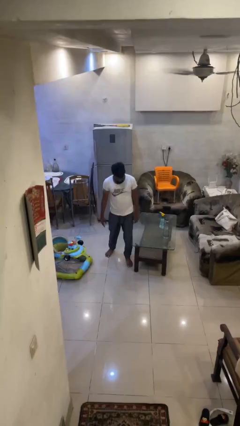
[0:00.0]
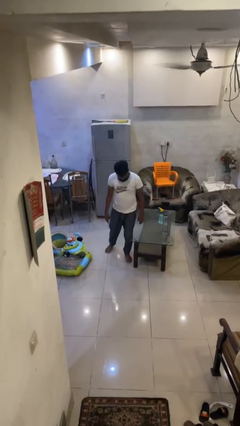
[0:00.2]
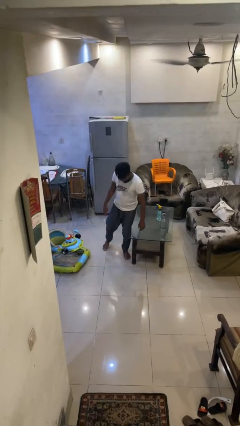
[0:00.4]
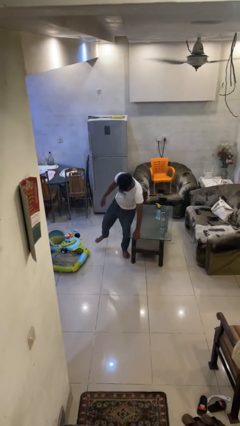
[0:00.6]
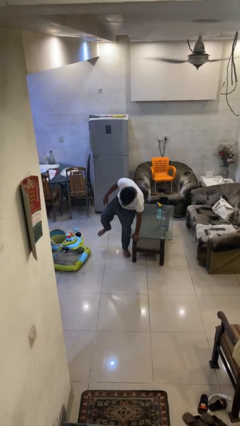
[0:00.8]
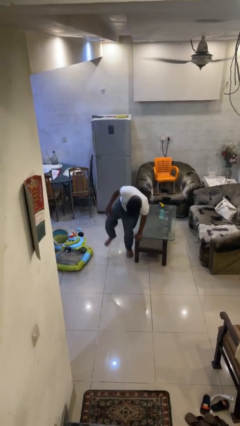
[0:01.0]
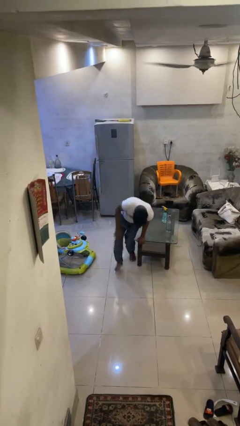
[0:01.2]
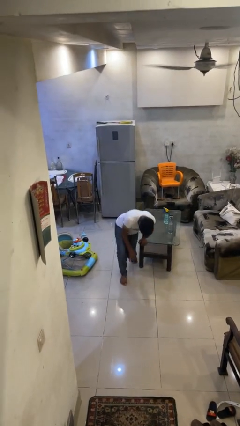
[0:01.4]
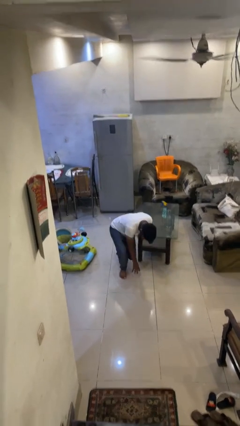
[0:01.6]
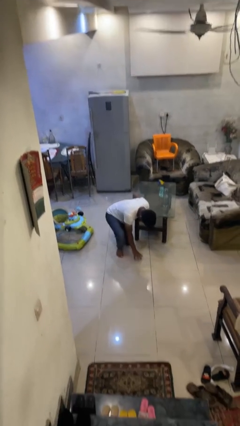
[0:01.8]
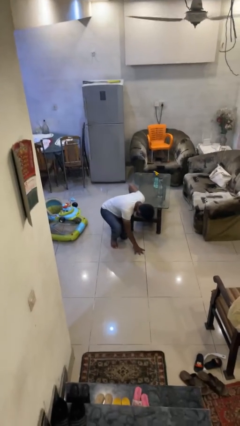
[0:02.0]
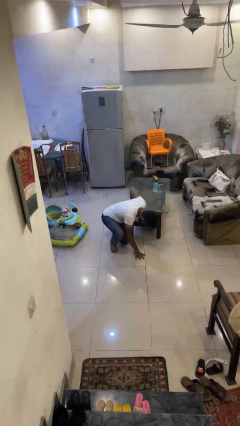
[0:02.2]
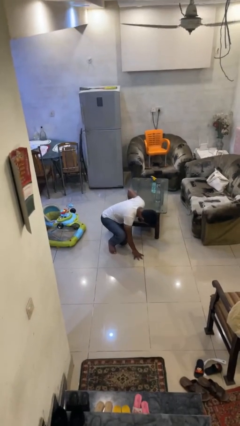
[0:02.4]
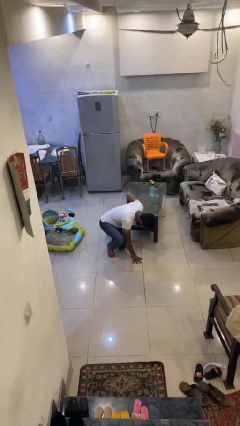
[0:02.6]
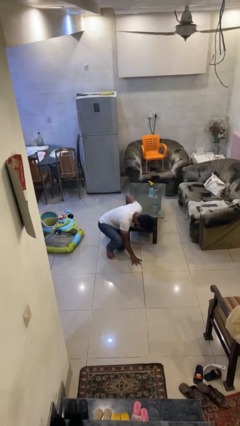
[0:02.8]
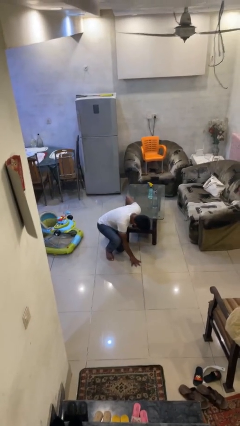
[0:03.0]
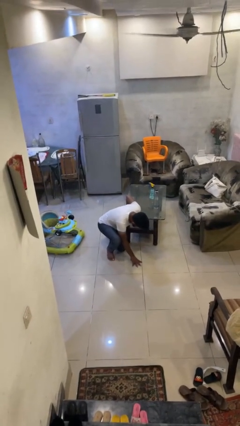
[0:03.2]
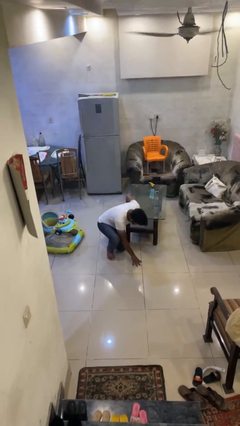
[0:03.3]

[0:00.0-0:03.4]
person trips on object on floor

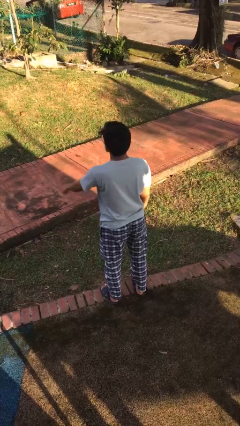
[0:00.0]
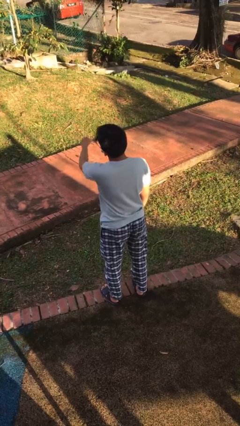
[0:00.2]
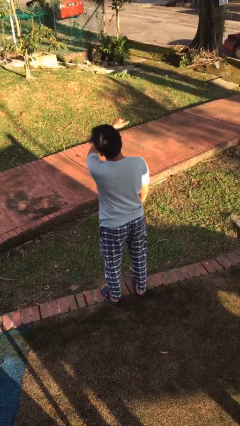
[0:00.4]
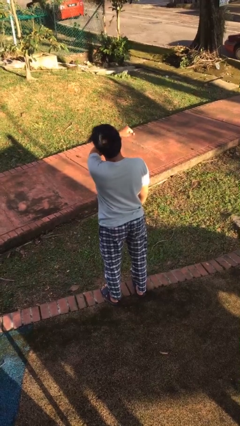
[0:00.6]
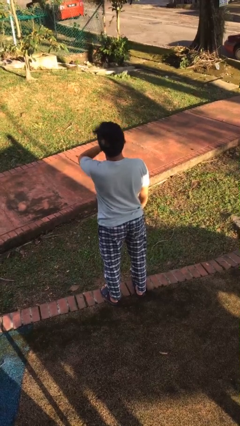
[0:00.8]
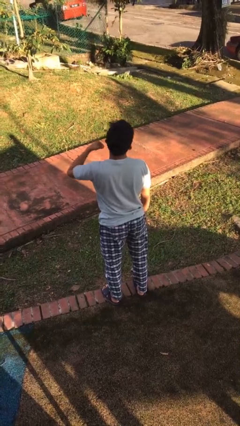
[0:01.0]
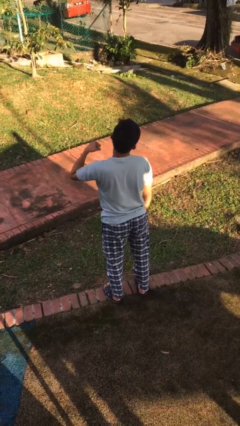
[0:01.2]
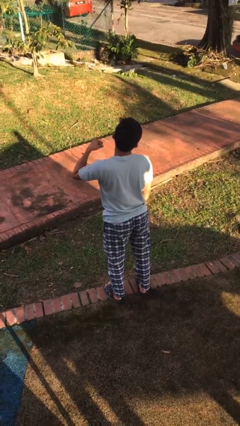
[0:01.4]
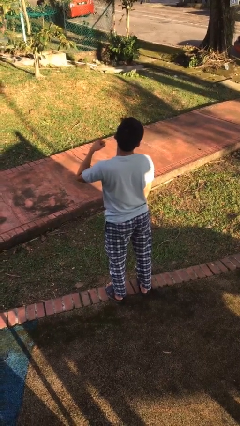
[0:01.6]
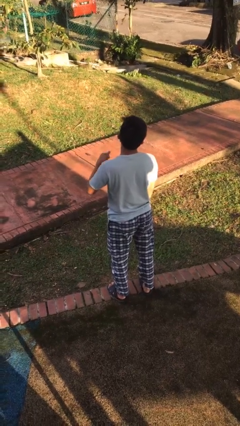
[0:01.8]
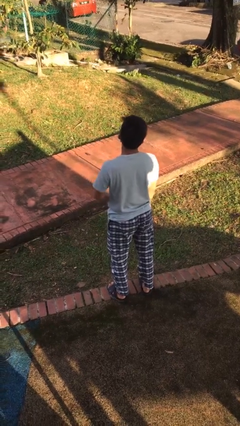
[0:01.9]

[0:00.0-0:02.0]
person gestures cut

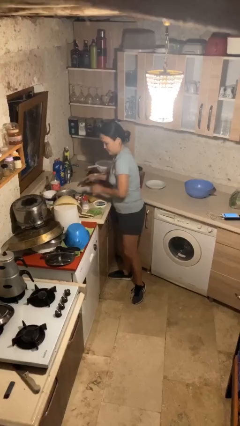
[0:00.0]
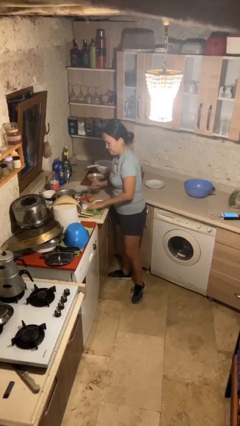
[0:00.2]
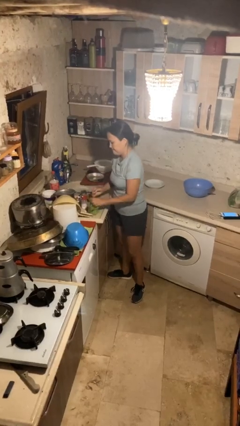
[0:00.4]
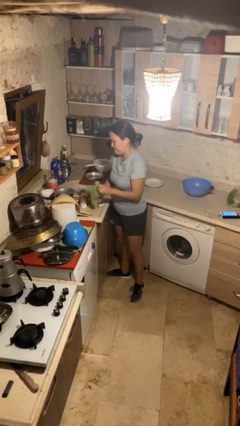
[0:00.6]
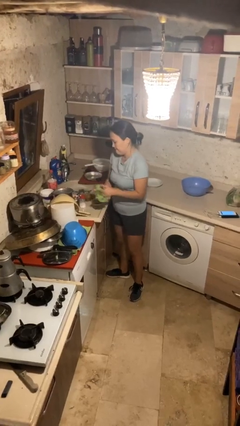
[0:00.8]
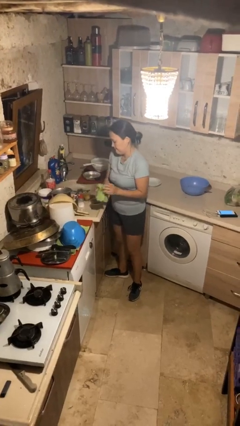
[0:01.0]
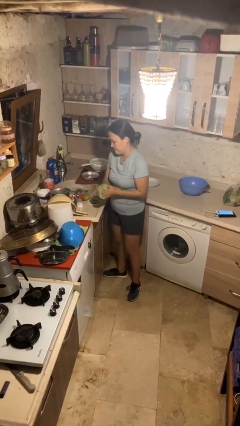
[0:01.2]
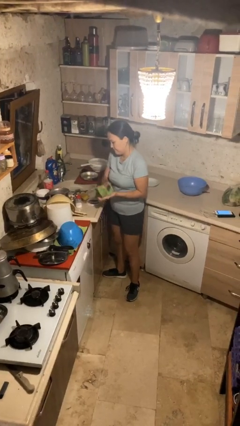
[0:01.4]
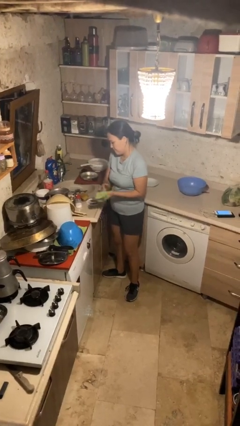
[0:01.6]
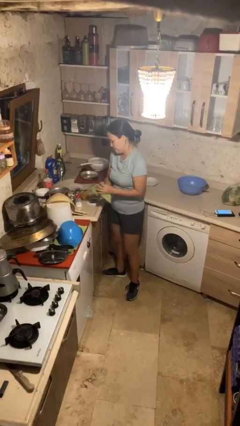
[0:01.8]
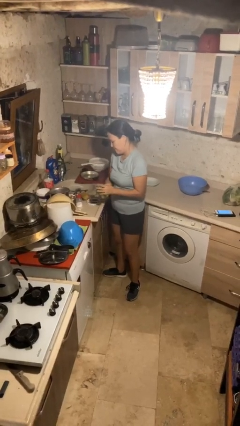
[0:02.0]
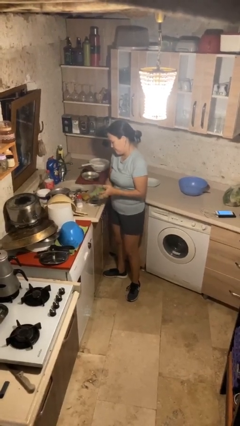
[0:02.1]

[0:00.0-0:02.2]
person dries hands with towel

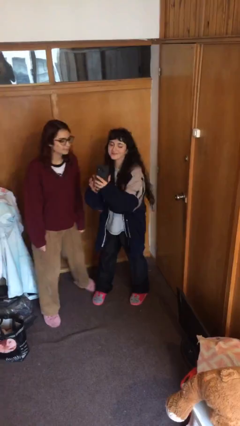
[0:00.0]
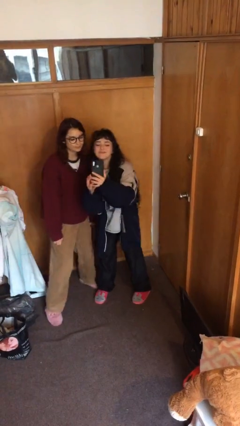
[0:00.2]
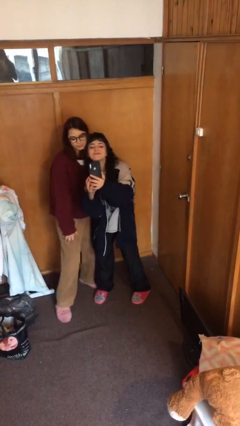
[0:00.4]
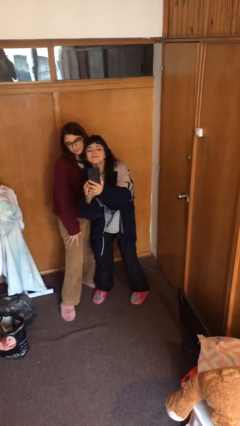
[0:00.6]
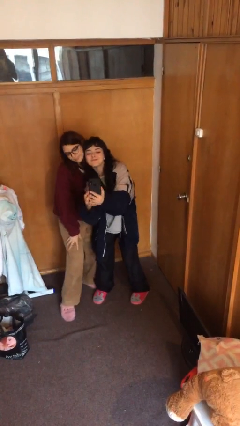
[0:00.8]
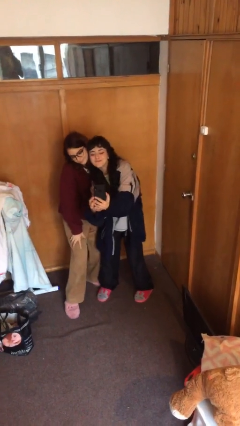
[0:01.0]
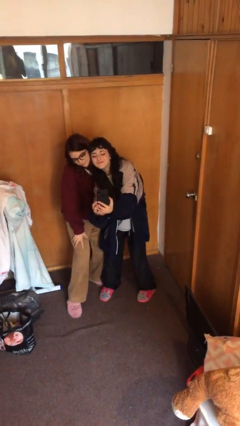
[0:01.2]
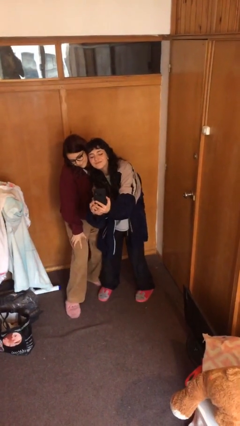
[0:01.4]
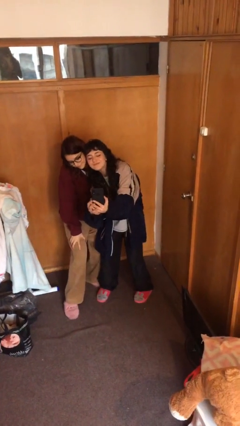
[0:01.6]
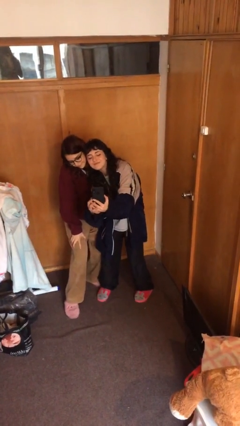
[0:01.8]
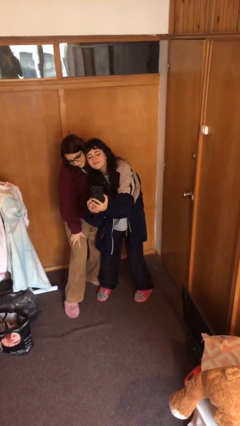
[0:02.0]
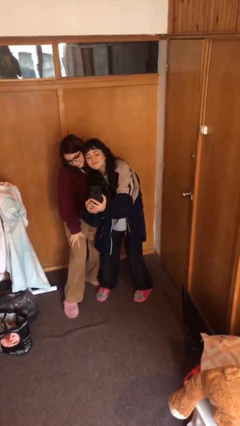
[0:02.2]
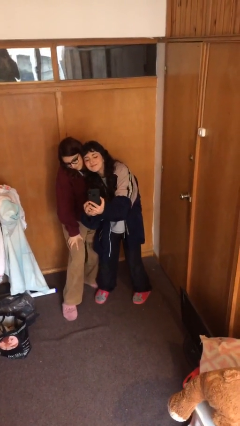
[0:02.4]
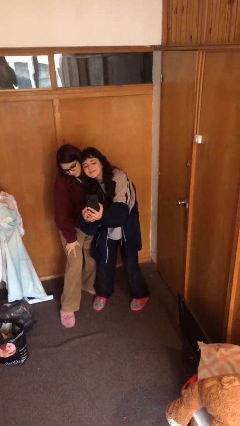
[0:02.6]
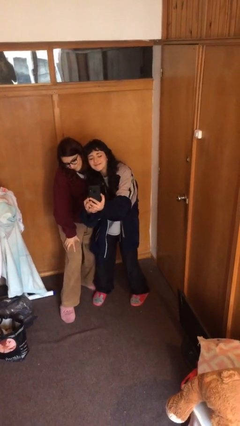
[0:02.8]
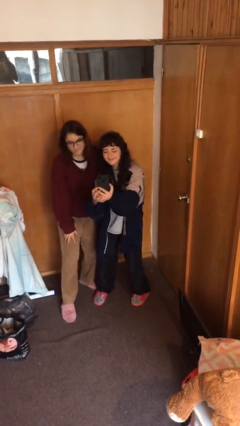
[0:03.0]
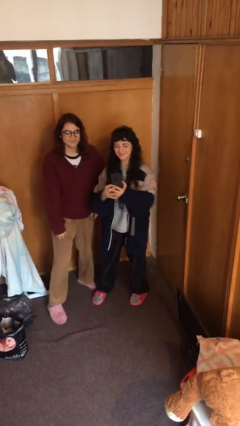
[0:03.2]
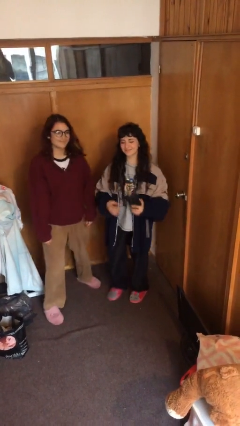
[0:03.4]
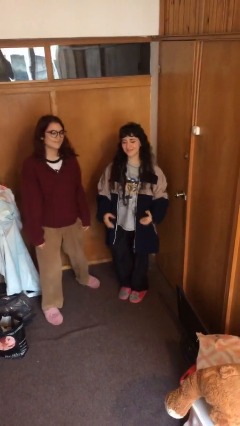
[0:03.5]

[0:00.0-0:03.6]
person takes selfie with person

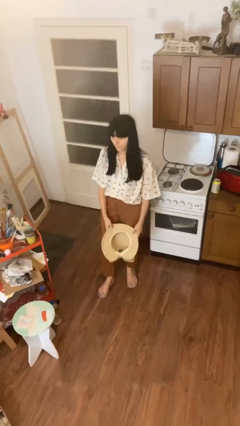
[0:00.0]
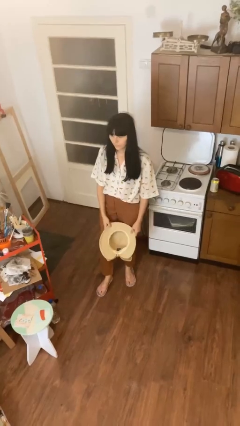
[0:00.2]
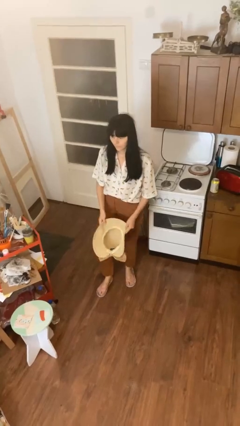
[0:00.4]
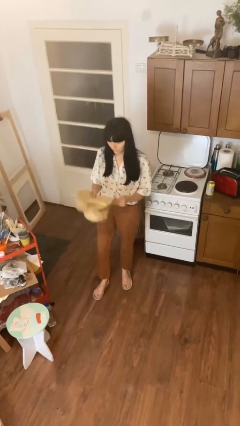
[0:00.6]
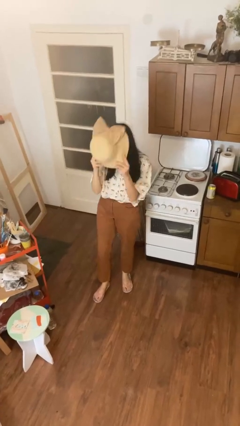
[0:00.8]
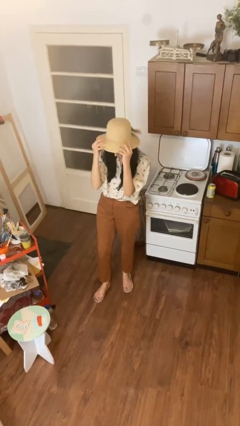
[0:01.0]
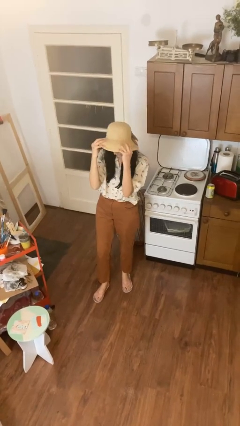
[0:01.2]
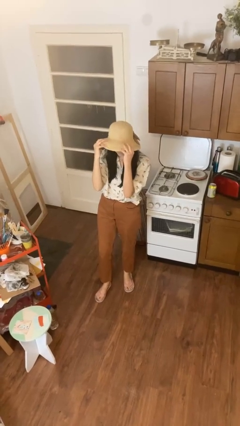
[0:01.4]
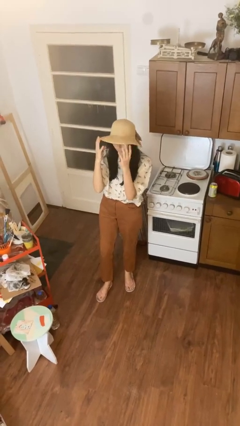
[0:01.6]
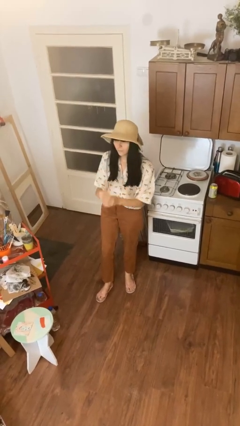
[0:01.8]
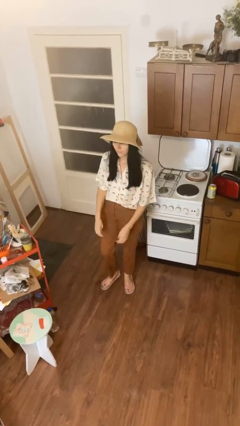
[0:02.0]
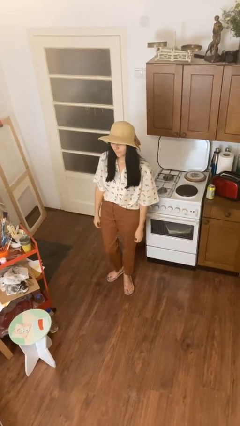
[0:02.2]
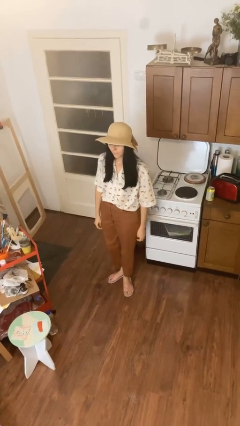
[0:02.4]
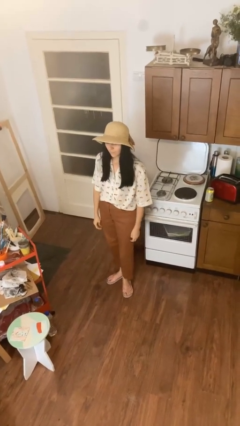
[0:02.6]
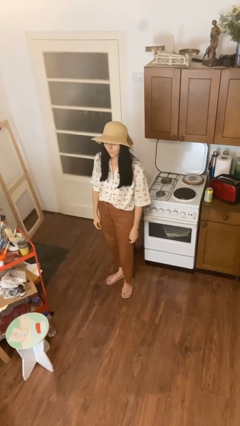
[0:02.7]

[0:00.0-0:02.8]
person puts on hat

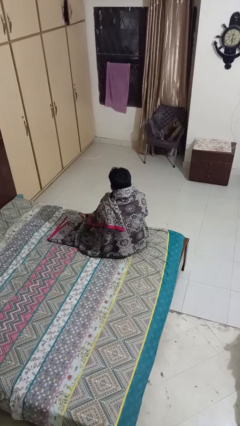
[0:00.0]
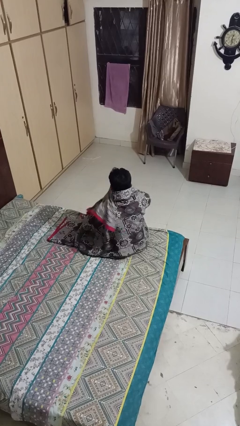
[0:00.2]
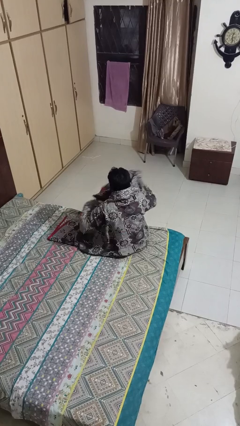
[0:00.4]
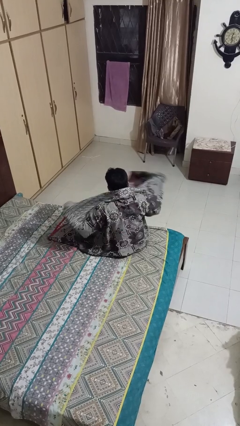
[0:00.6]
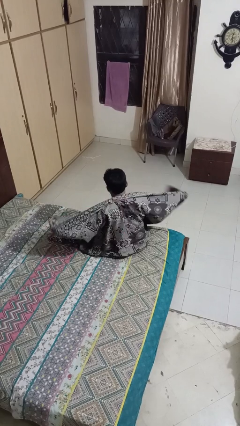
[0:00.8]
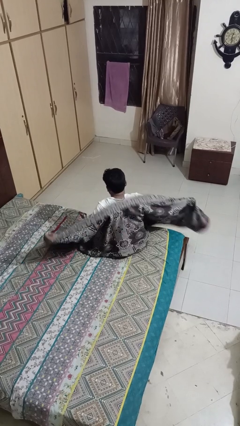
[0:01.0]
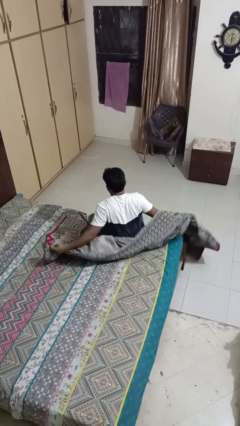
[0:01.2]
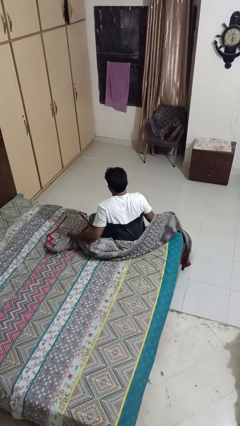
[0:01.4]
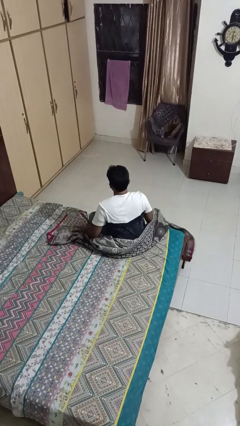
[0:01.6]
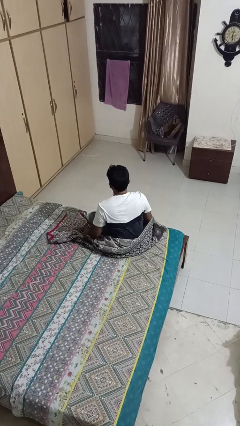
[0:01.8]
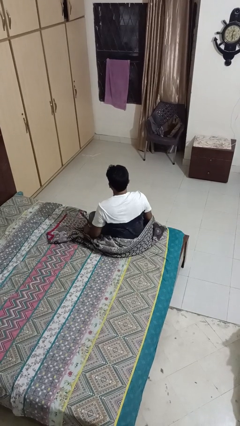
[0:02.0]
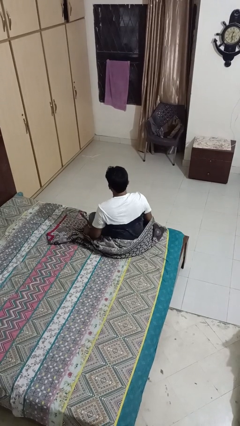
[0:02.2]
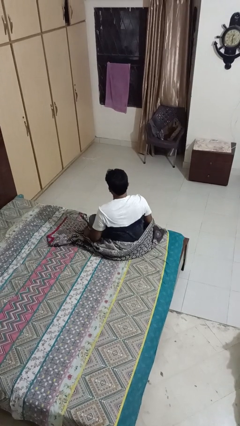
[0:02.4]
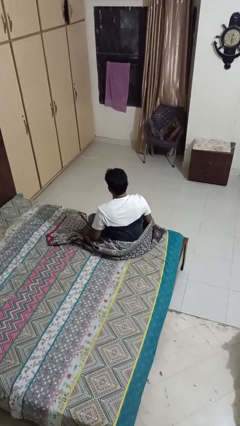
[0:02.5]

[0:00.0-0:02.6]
person uncovers with blanket

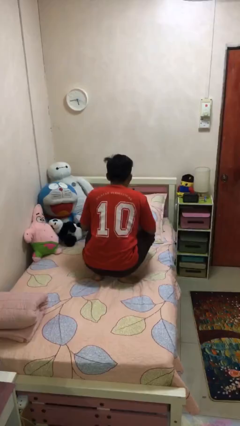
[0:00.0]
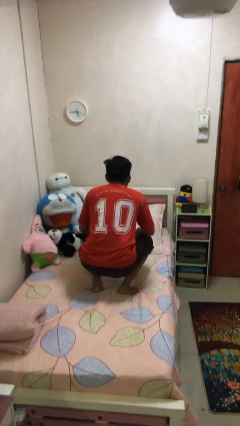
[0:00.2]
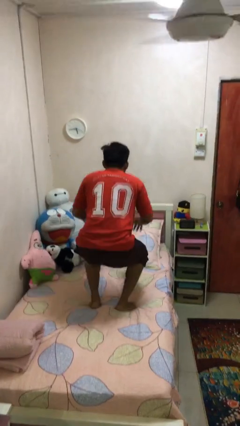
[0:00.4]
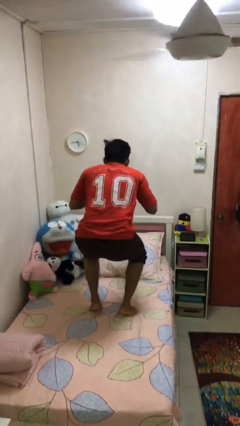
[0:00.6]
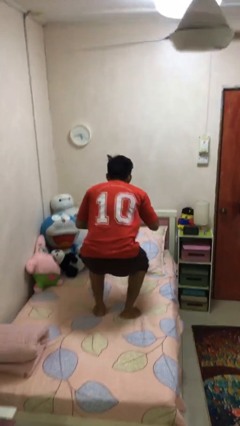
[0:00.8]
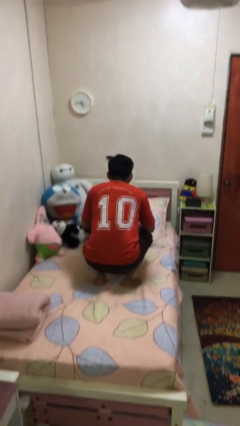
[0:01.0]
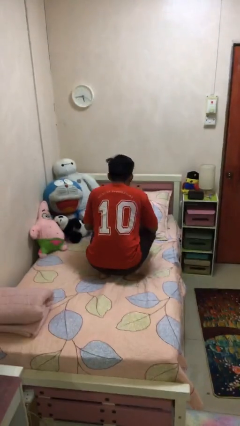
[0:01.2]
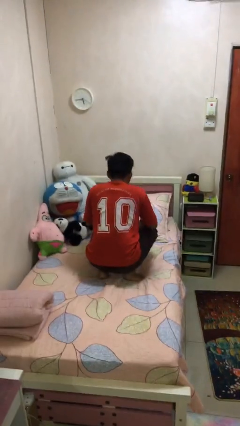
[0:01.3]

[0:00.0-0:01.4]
person jumps on bed
